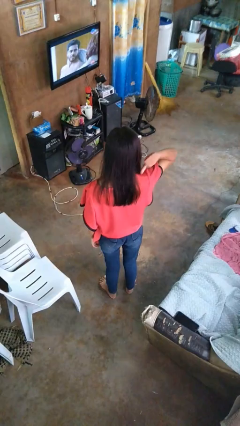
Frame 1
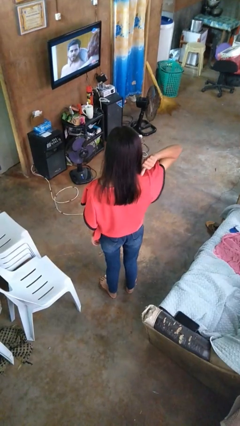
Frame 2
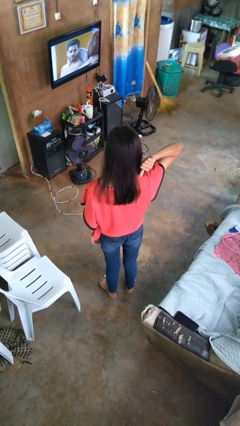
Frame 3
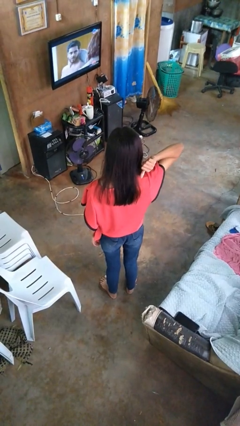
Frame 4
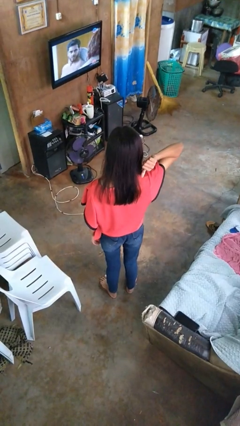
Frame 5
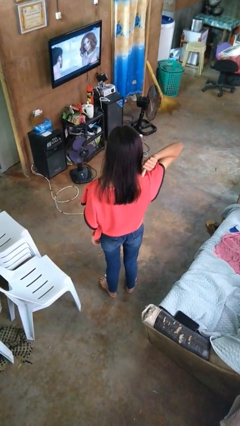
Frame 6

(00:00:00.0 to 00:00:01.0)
person gestures behind me

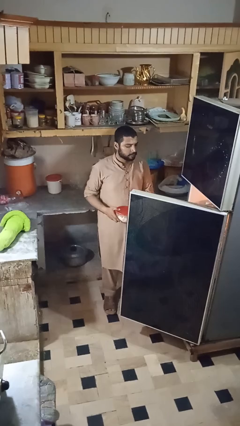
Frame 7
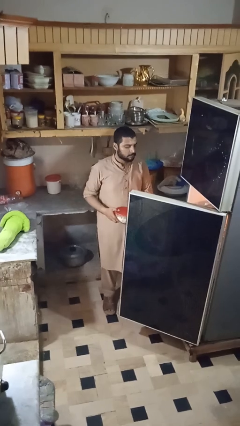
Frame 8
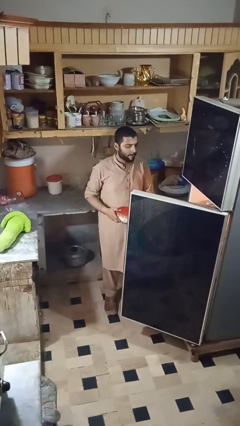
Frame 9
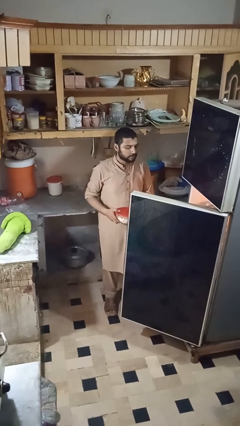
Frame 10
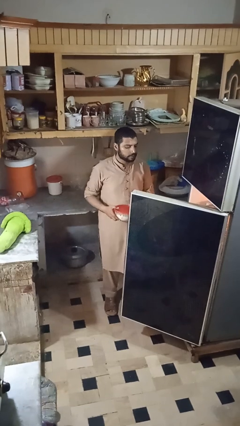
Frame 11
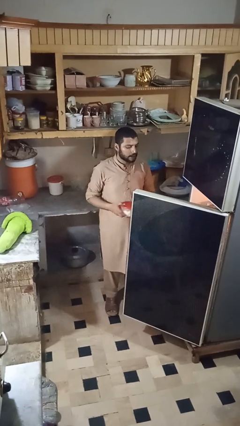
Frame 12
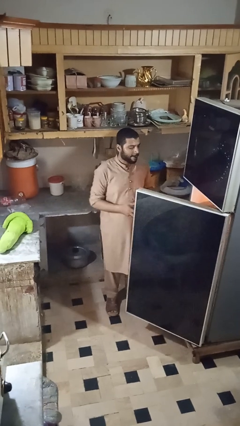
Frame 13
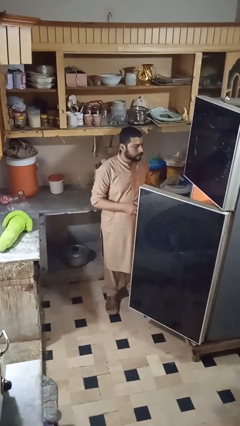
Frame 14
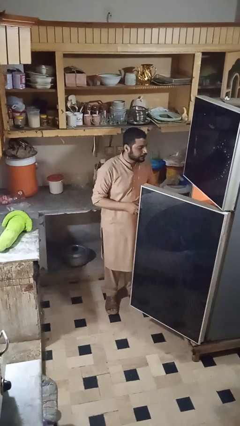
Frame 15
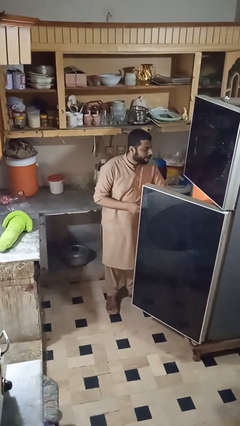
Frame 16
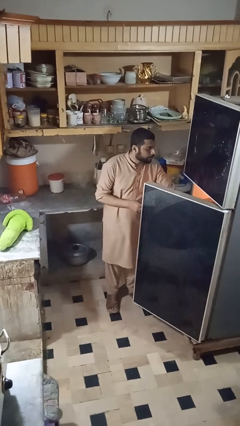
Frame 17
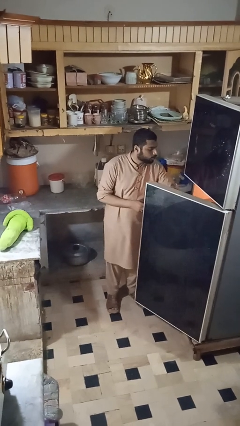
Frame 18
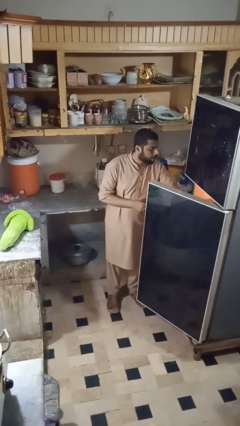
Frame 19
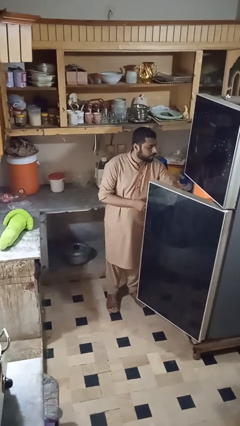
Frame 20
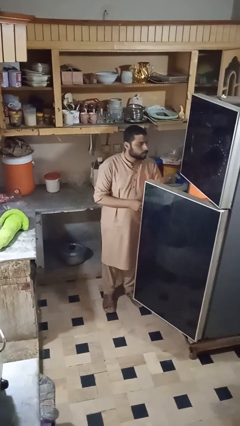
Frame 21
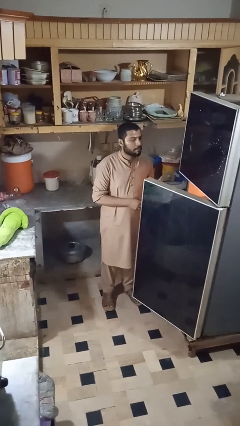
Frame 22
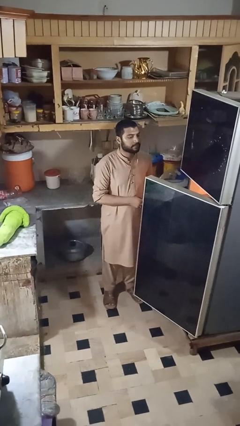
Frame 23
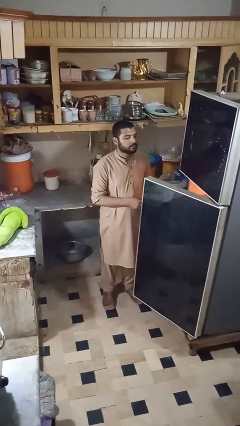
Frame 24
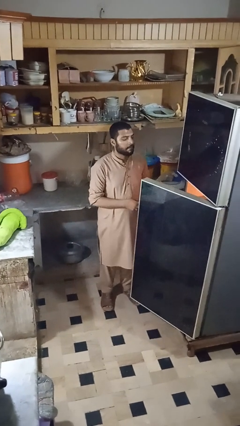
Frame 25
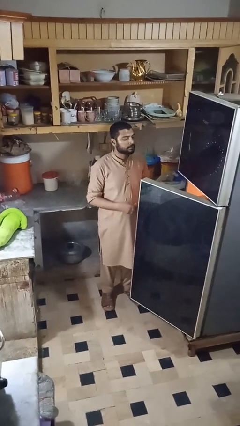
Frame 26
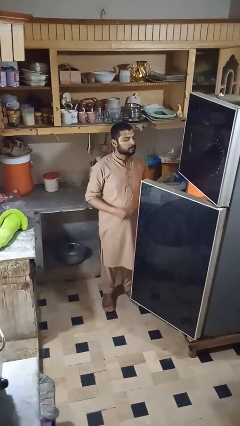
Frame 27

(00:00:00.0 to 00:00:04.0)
person puts object into refrigerator

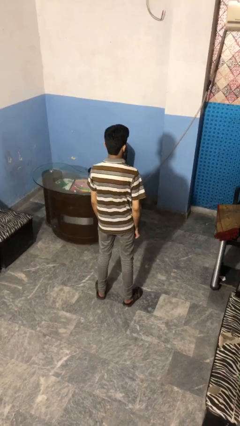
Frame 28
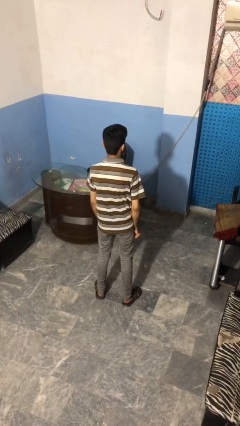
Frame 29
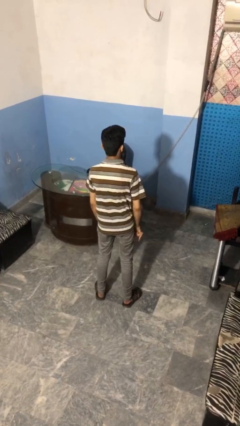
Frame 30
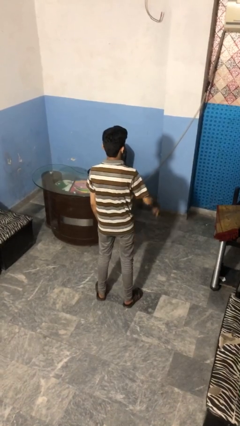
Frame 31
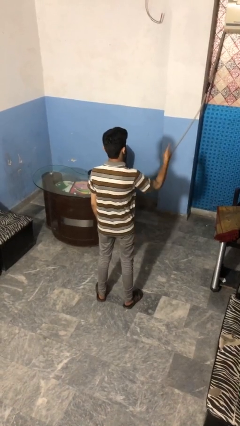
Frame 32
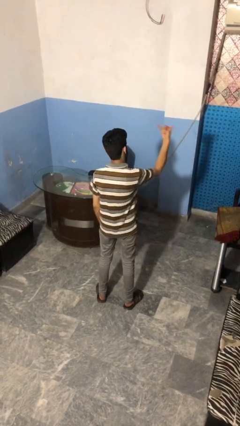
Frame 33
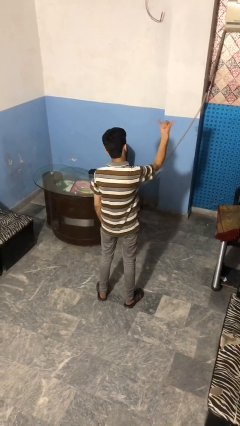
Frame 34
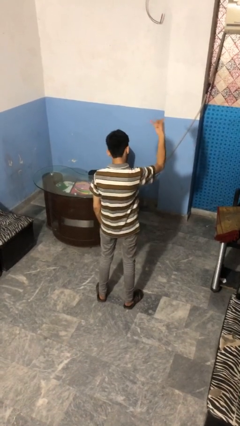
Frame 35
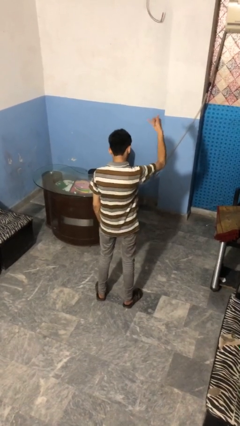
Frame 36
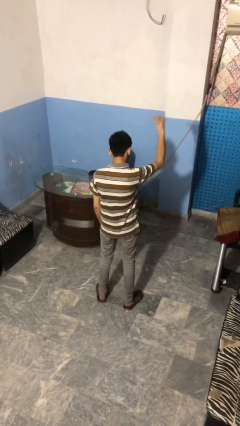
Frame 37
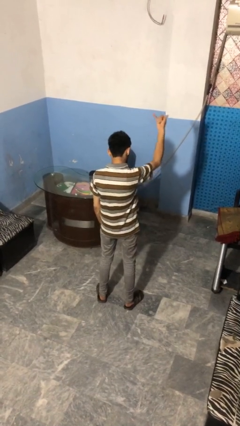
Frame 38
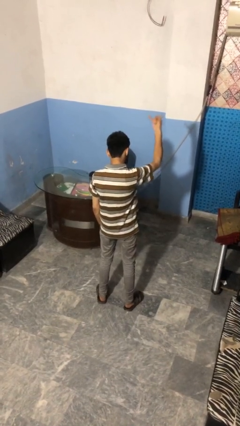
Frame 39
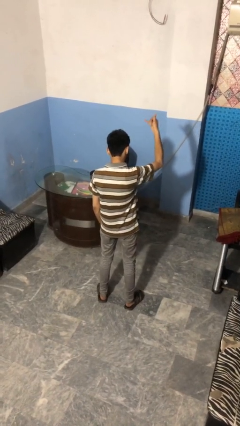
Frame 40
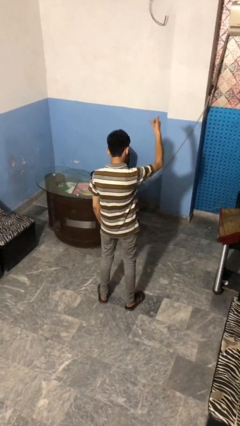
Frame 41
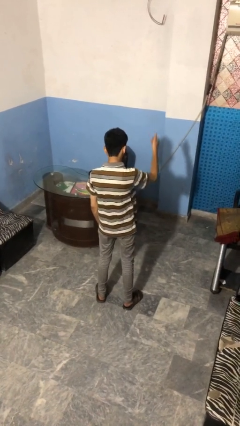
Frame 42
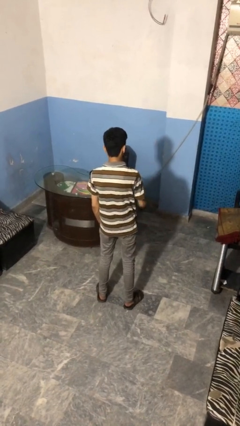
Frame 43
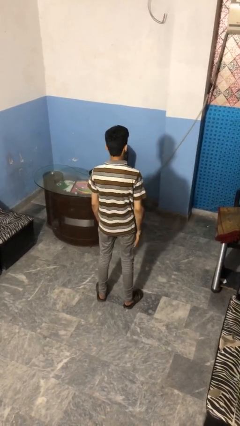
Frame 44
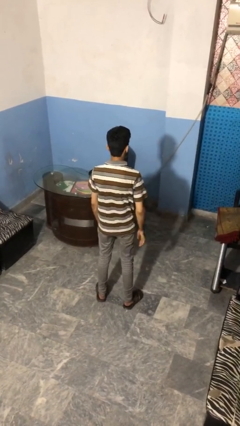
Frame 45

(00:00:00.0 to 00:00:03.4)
person gestures hang loose

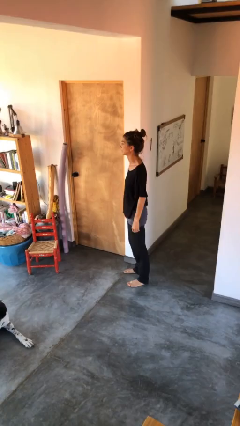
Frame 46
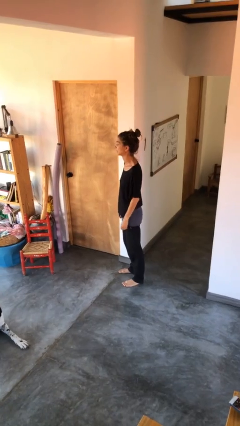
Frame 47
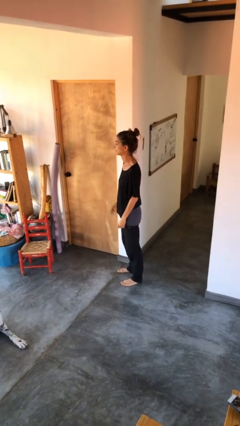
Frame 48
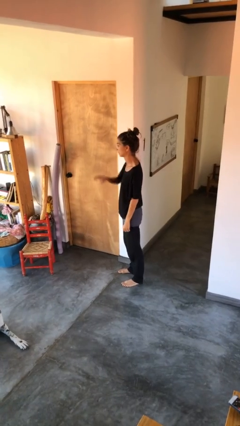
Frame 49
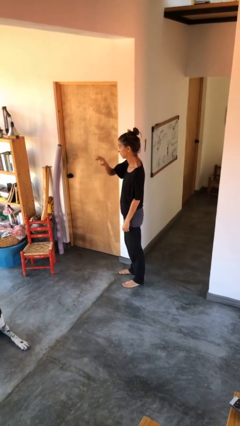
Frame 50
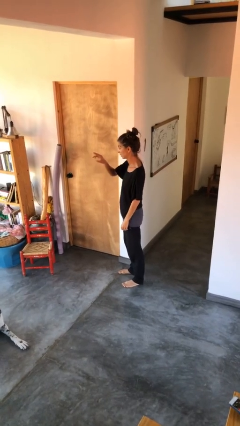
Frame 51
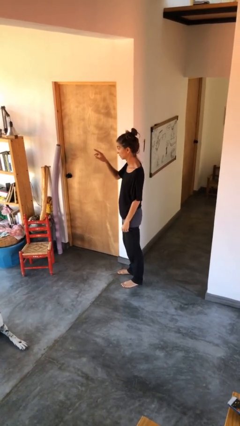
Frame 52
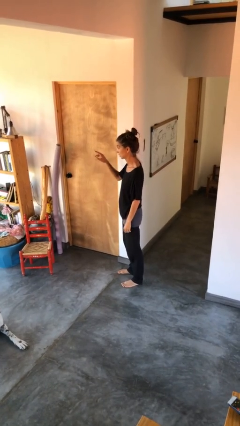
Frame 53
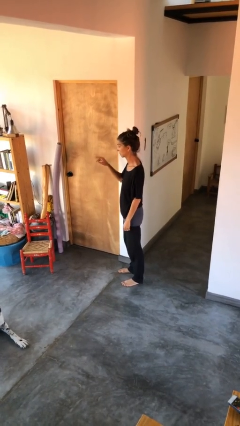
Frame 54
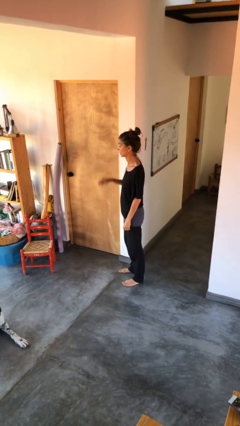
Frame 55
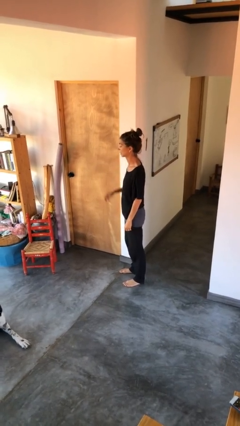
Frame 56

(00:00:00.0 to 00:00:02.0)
person gestures swipe right

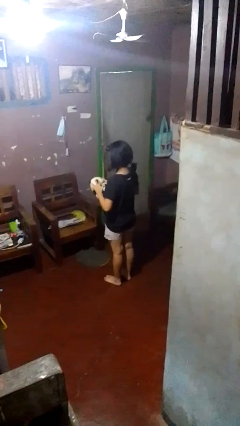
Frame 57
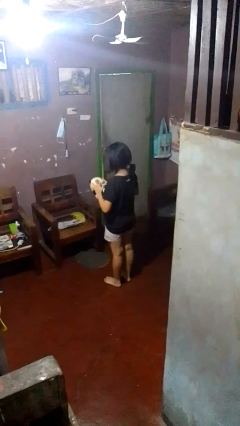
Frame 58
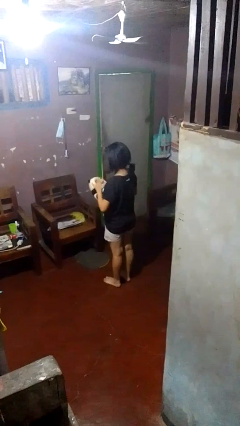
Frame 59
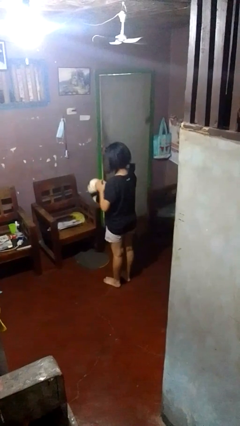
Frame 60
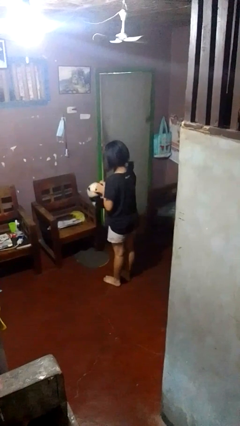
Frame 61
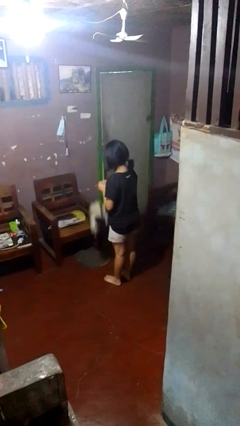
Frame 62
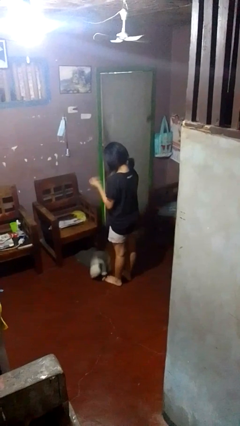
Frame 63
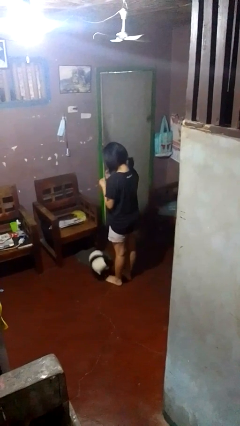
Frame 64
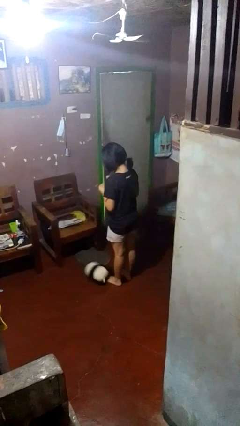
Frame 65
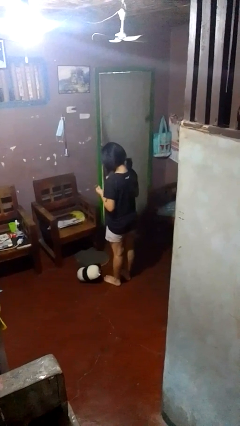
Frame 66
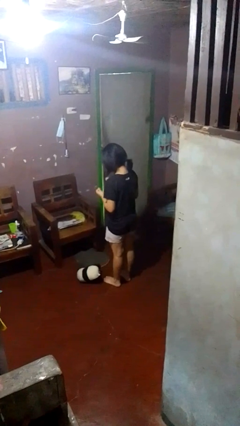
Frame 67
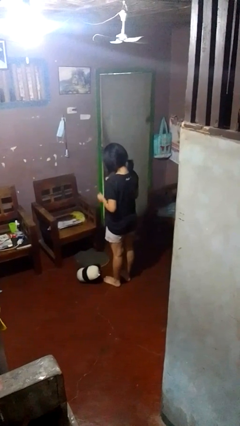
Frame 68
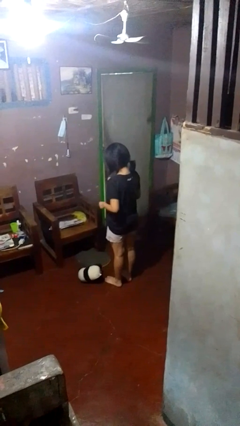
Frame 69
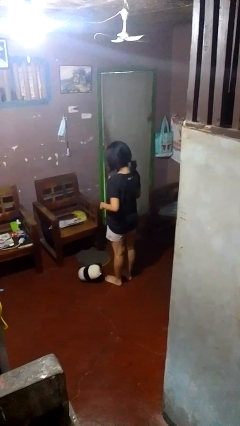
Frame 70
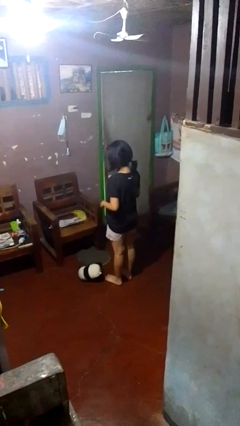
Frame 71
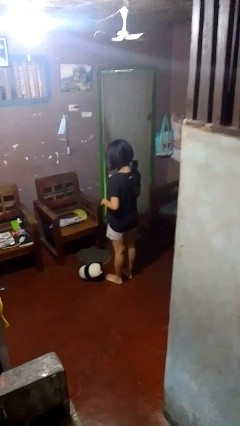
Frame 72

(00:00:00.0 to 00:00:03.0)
person drops object

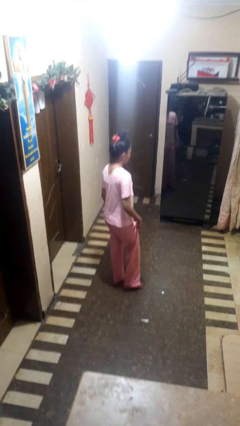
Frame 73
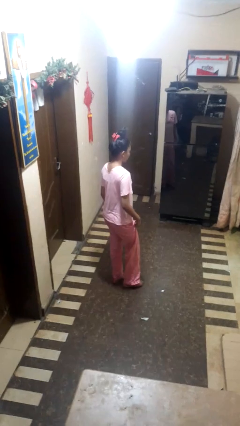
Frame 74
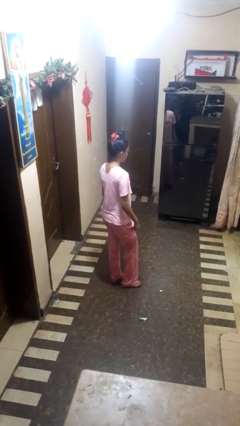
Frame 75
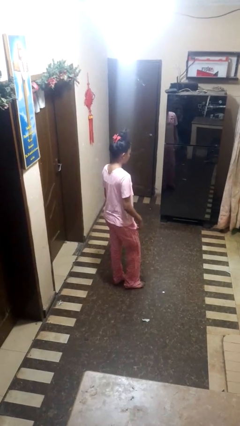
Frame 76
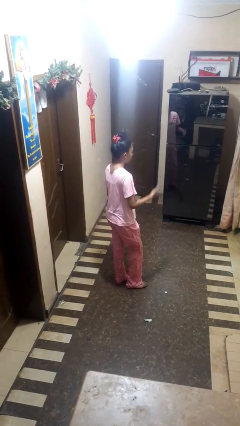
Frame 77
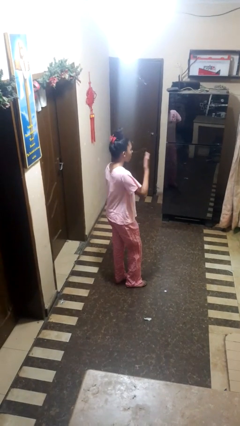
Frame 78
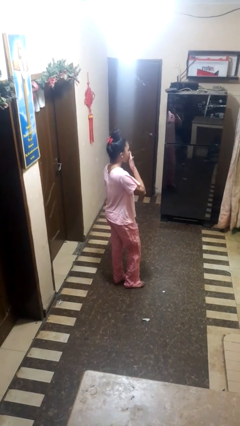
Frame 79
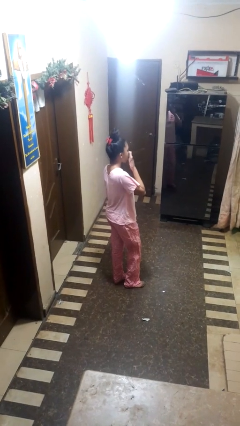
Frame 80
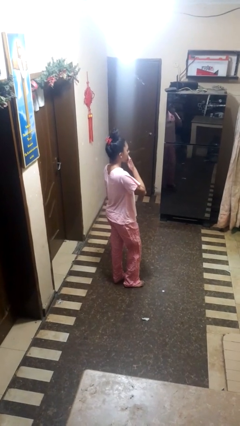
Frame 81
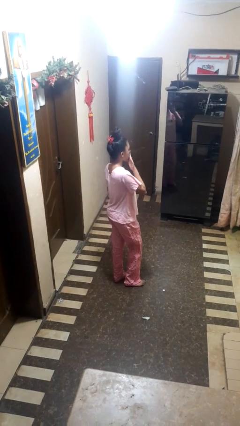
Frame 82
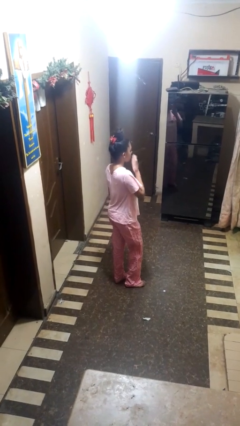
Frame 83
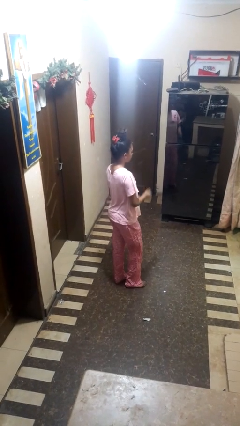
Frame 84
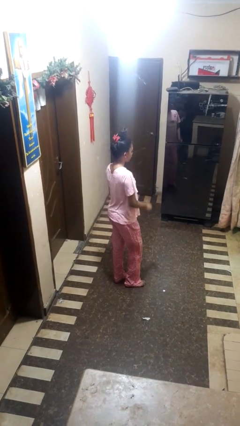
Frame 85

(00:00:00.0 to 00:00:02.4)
person yawns

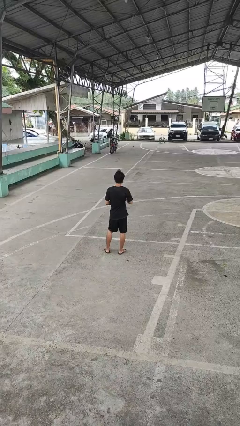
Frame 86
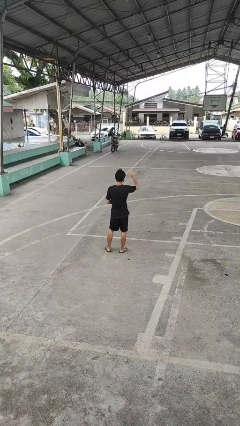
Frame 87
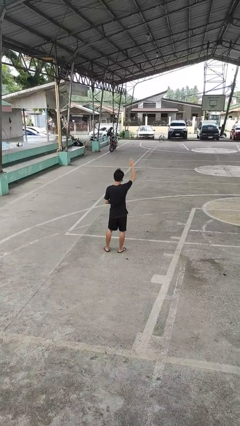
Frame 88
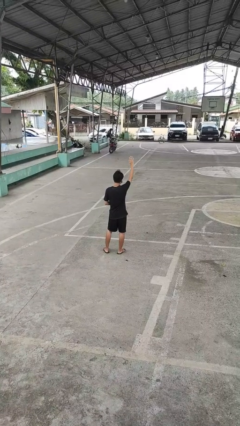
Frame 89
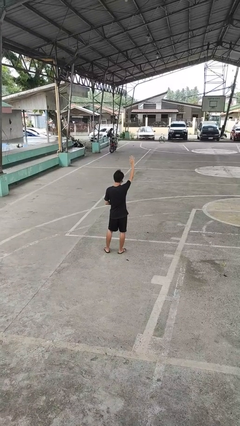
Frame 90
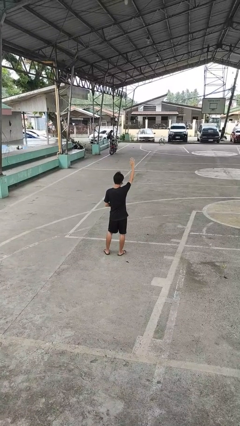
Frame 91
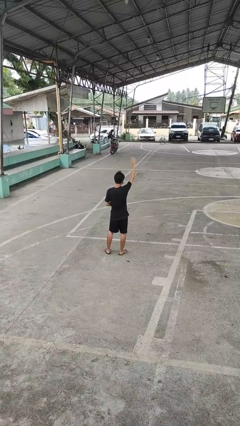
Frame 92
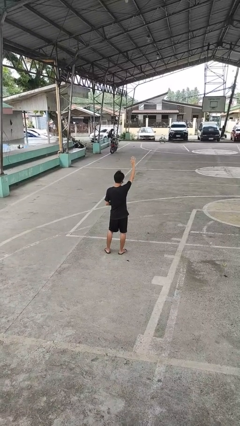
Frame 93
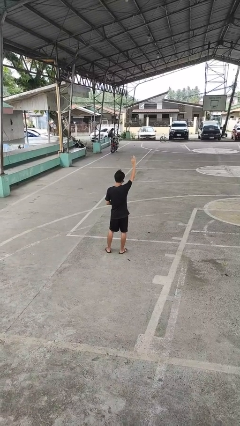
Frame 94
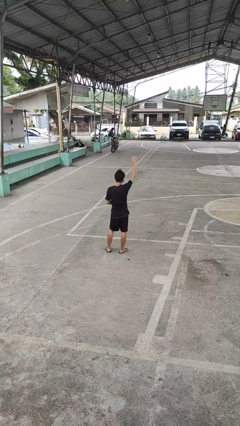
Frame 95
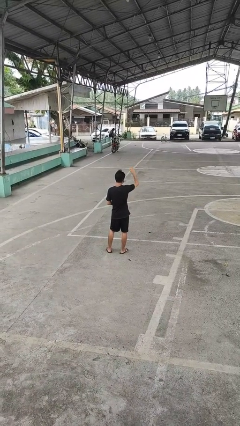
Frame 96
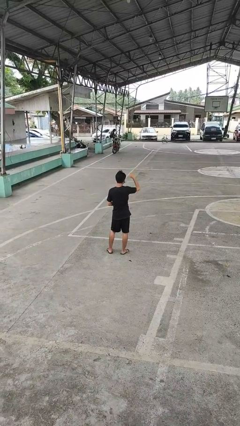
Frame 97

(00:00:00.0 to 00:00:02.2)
person gestures raise hand
